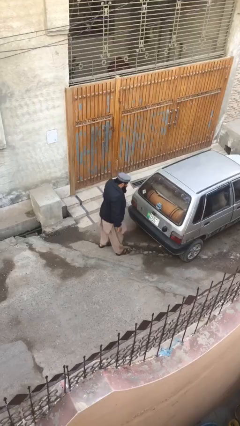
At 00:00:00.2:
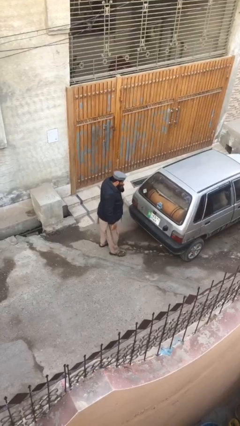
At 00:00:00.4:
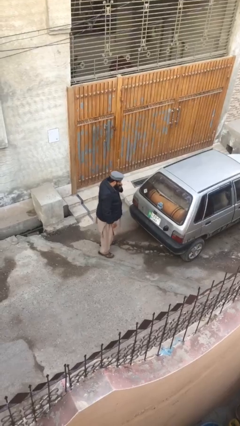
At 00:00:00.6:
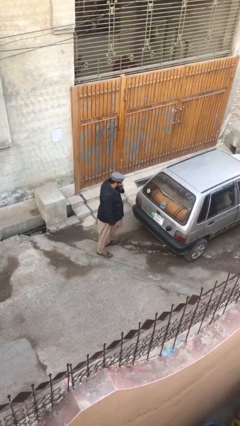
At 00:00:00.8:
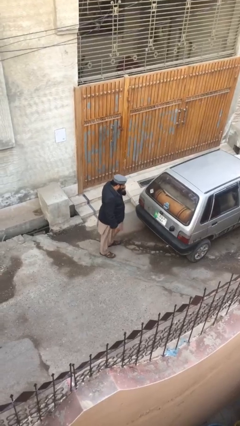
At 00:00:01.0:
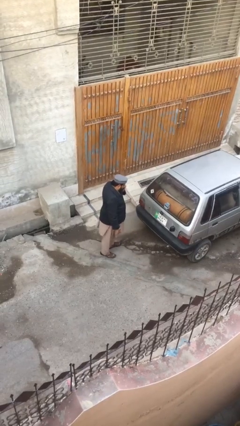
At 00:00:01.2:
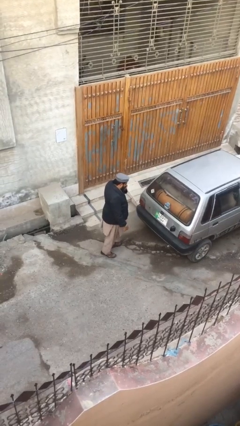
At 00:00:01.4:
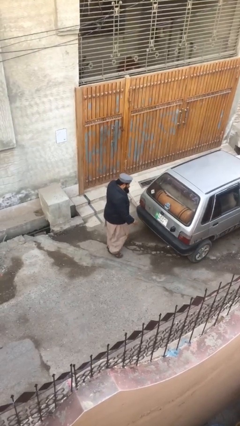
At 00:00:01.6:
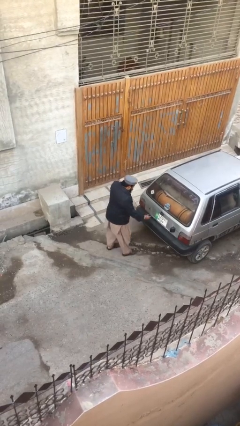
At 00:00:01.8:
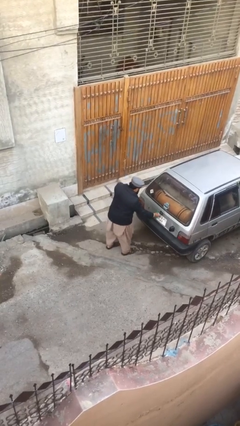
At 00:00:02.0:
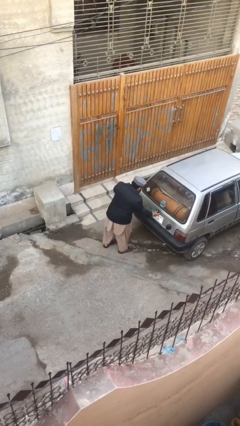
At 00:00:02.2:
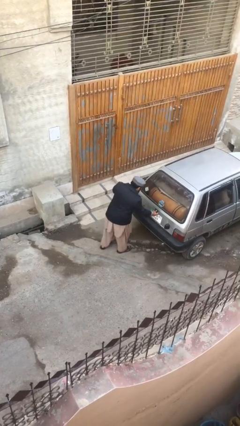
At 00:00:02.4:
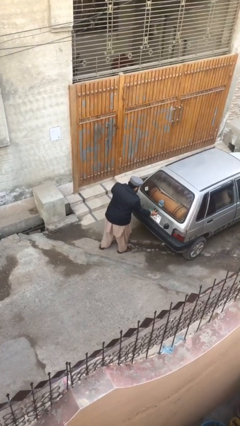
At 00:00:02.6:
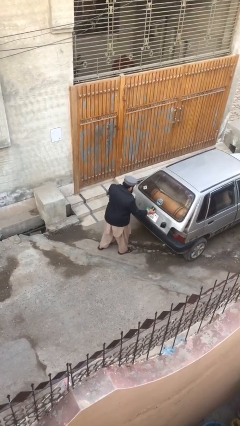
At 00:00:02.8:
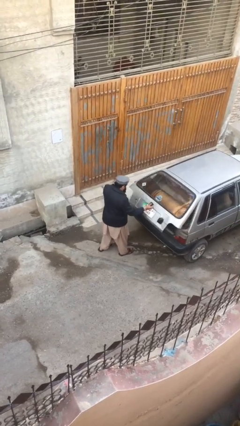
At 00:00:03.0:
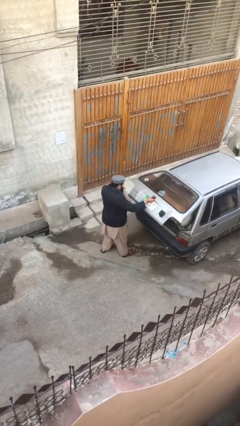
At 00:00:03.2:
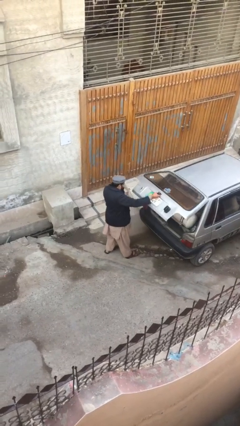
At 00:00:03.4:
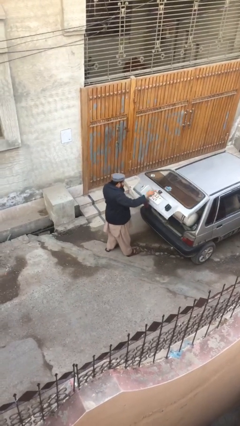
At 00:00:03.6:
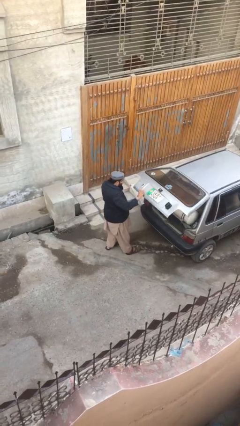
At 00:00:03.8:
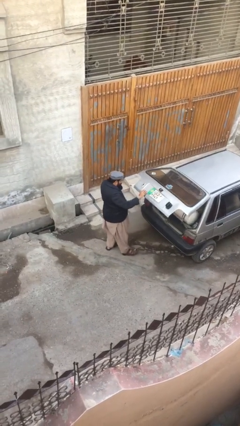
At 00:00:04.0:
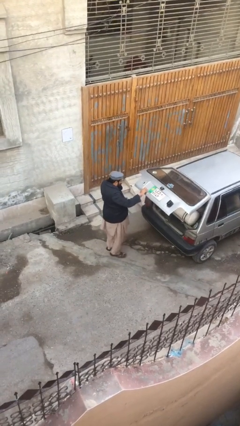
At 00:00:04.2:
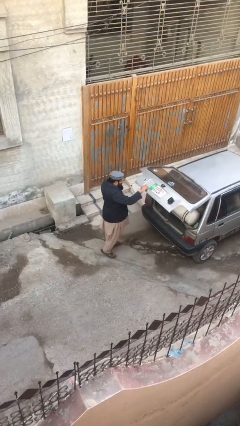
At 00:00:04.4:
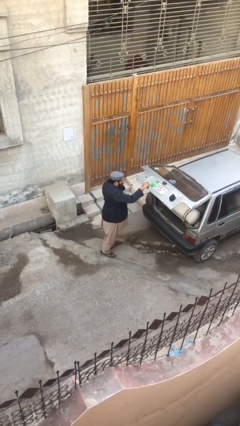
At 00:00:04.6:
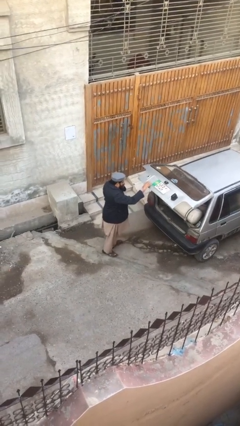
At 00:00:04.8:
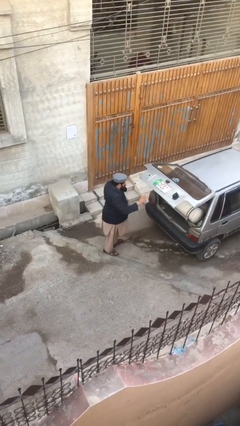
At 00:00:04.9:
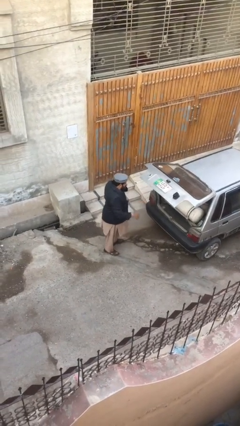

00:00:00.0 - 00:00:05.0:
person opens car trunk

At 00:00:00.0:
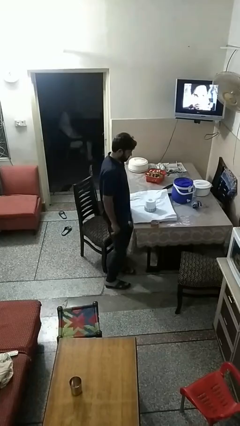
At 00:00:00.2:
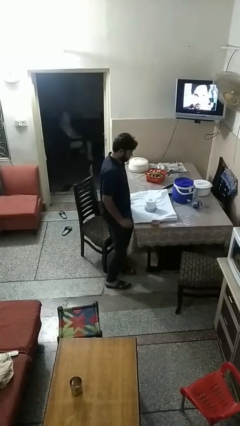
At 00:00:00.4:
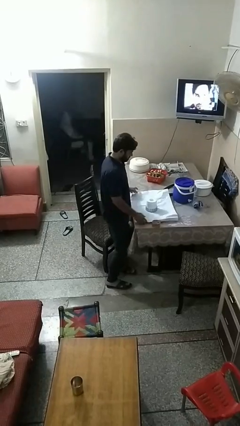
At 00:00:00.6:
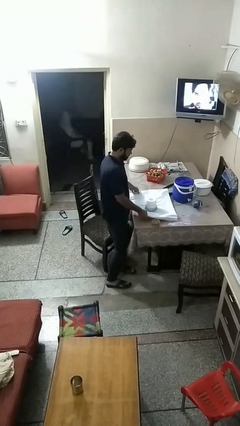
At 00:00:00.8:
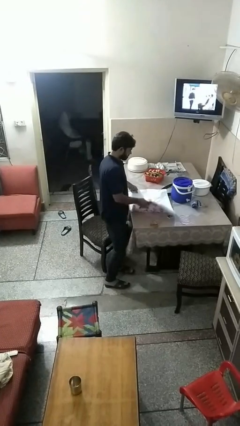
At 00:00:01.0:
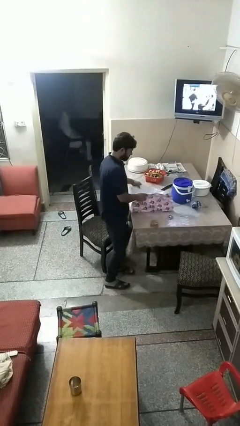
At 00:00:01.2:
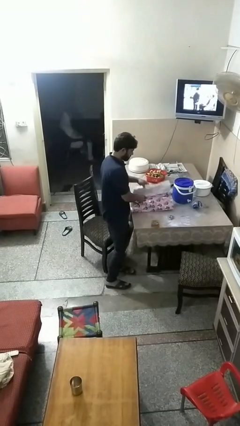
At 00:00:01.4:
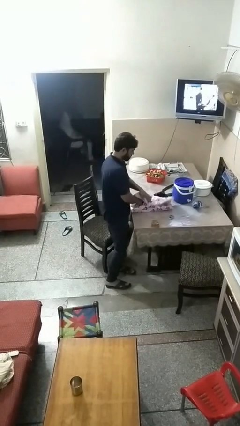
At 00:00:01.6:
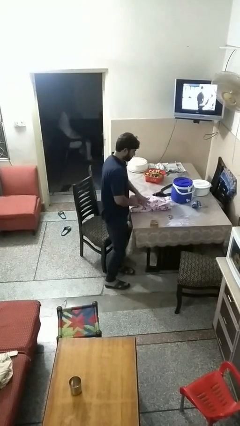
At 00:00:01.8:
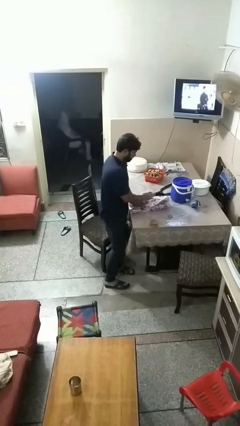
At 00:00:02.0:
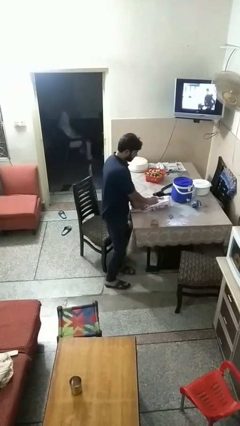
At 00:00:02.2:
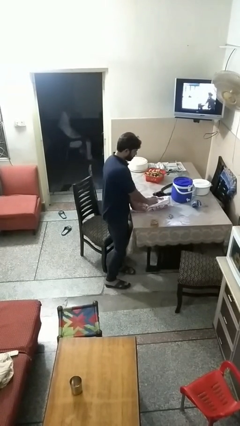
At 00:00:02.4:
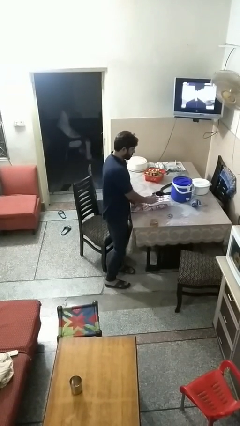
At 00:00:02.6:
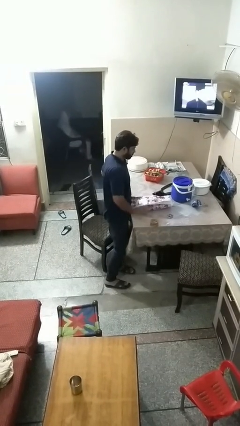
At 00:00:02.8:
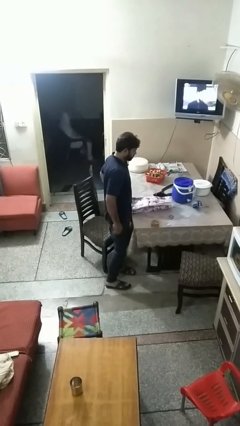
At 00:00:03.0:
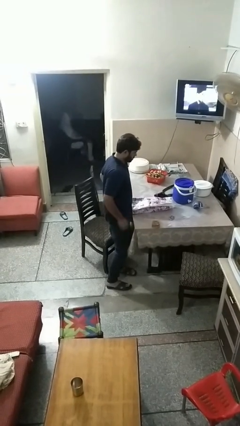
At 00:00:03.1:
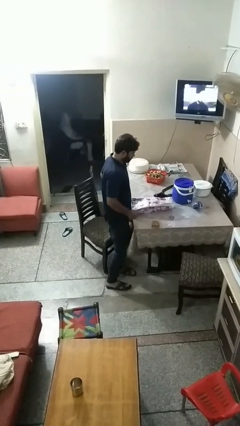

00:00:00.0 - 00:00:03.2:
person wraps box

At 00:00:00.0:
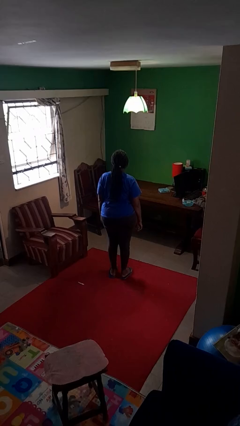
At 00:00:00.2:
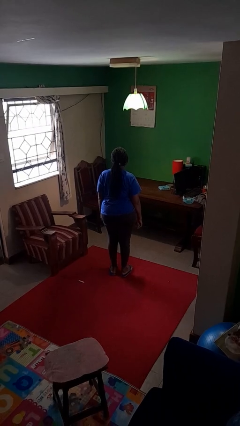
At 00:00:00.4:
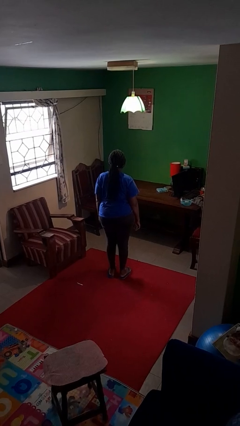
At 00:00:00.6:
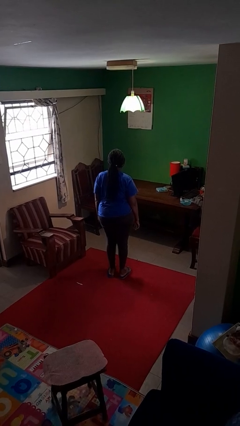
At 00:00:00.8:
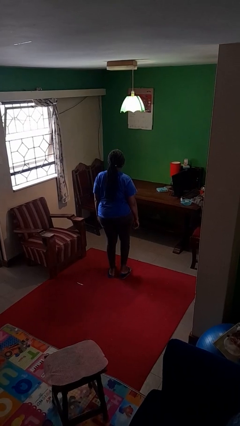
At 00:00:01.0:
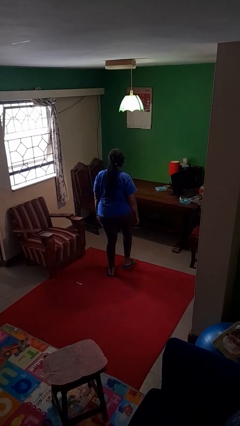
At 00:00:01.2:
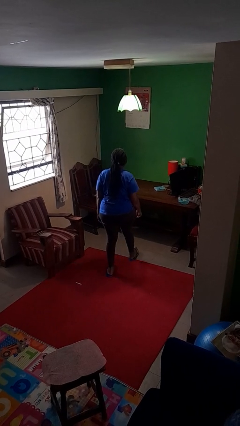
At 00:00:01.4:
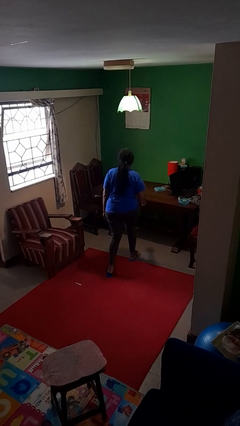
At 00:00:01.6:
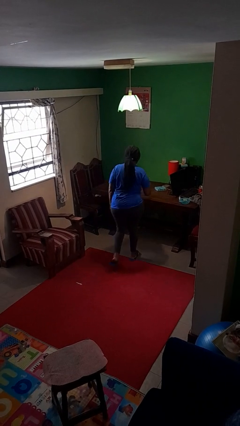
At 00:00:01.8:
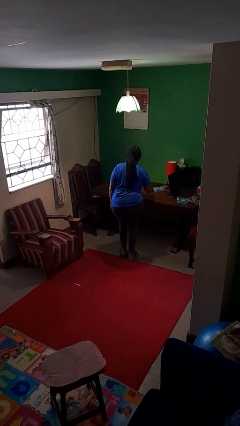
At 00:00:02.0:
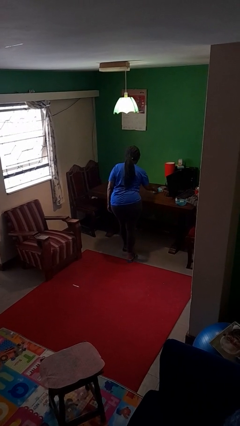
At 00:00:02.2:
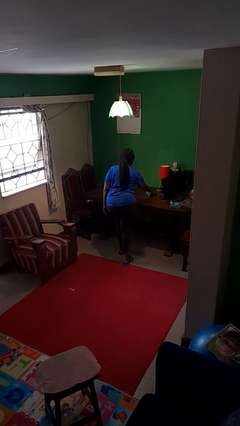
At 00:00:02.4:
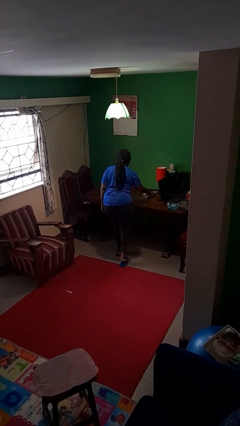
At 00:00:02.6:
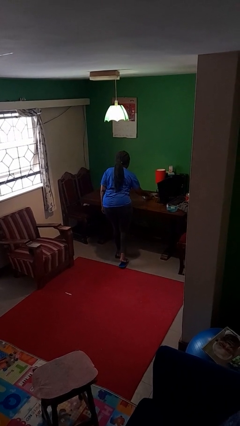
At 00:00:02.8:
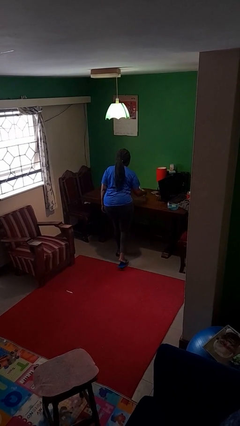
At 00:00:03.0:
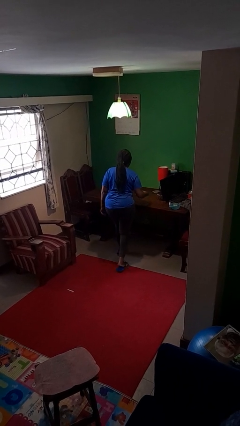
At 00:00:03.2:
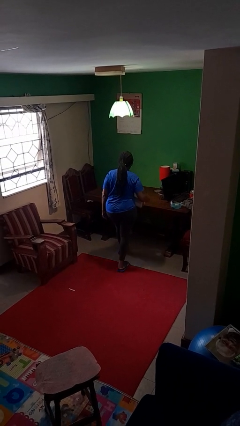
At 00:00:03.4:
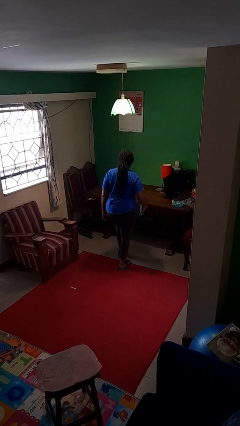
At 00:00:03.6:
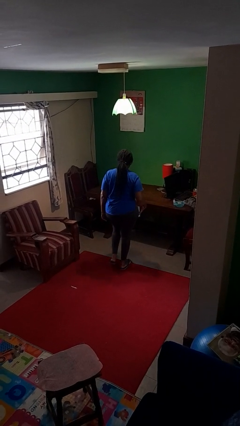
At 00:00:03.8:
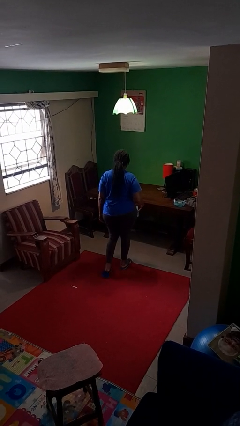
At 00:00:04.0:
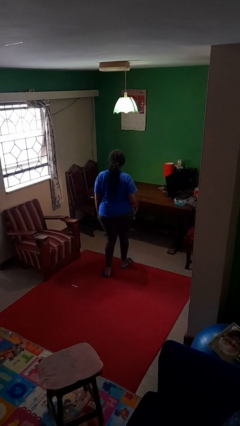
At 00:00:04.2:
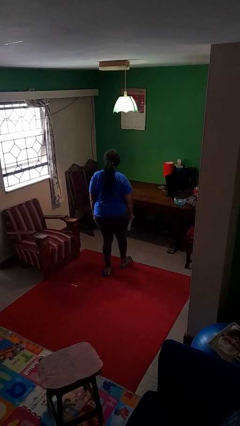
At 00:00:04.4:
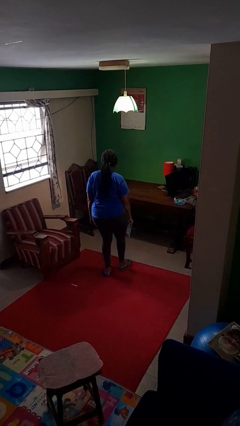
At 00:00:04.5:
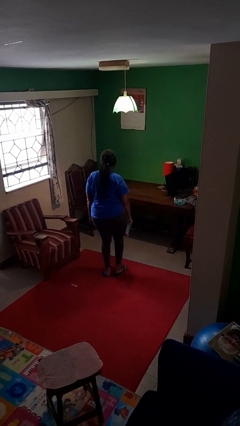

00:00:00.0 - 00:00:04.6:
person picks up object from table

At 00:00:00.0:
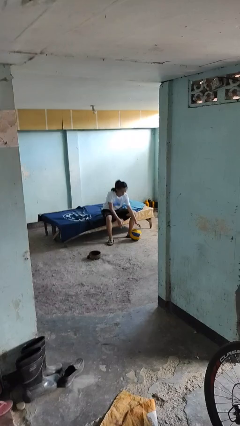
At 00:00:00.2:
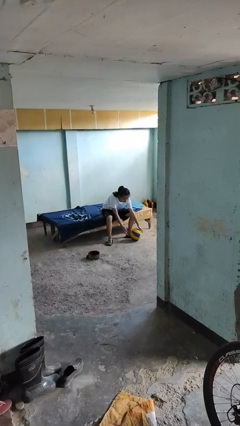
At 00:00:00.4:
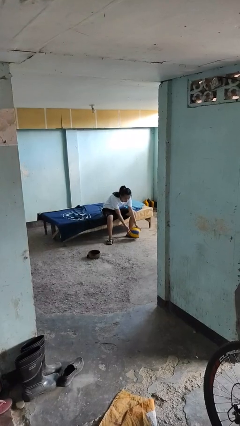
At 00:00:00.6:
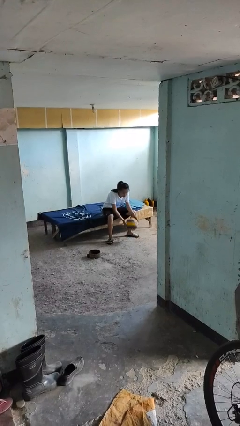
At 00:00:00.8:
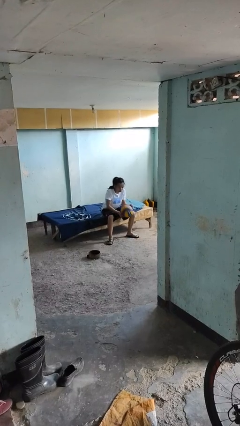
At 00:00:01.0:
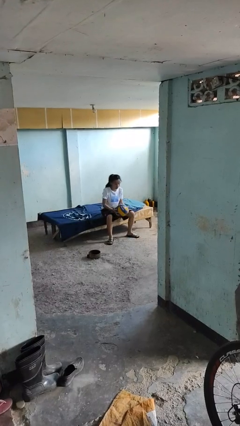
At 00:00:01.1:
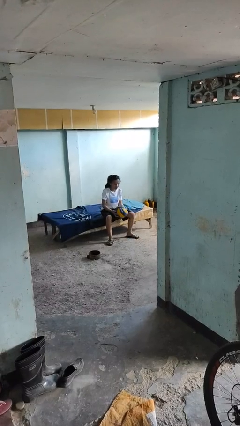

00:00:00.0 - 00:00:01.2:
person picks up object from floor

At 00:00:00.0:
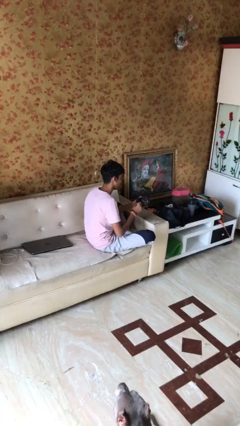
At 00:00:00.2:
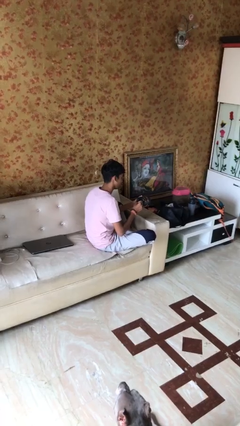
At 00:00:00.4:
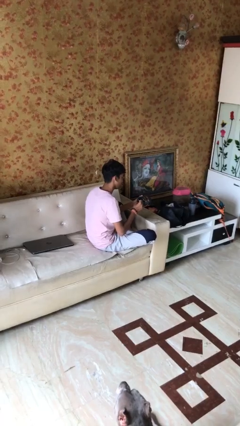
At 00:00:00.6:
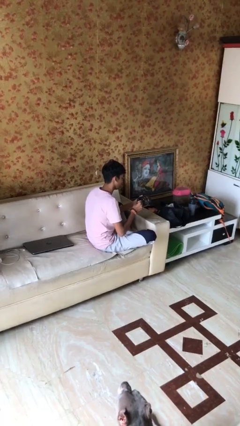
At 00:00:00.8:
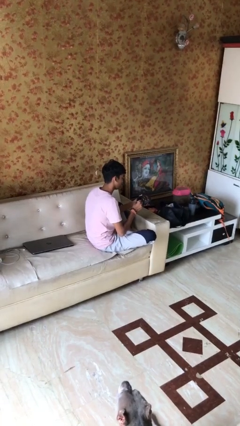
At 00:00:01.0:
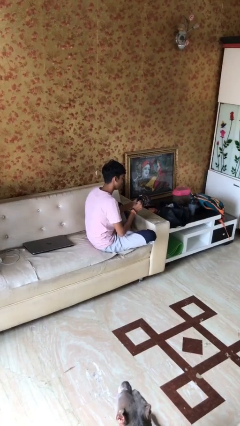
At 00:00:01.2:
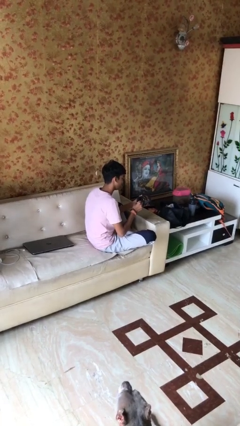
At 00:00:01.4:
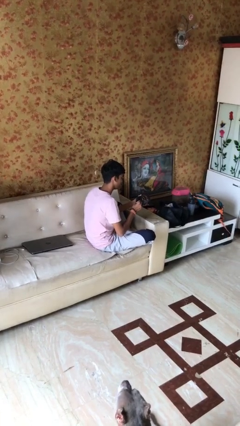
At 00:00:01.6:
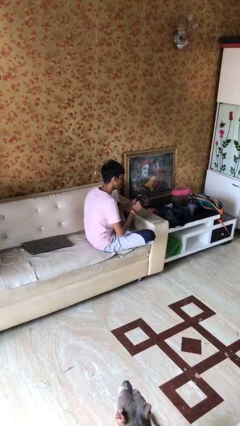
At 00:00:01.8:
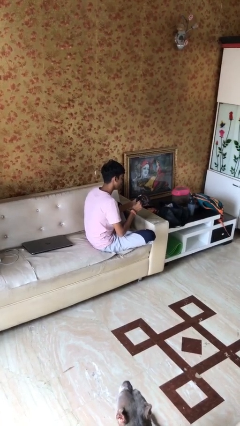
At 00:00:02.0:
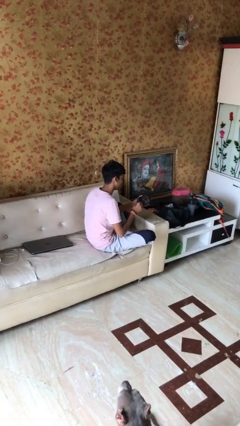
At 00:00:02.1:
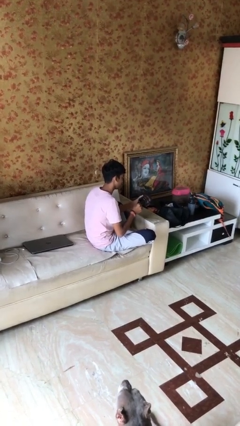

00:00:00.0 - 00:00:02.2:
person taps object with finger

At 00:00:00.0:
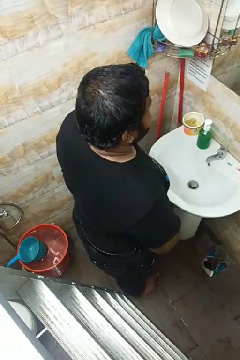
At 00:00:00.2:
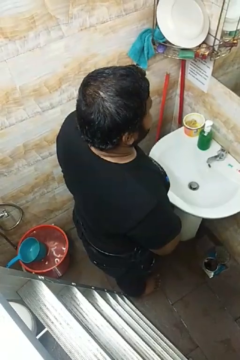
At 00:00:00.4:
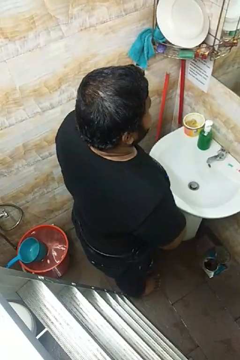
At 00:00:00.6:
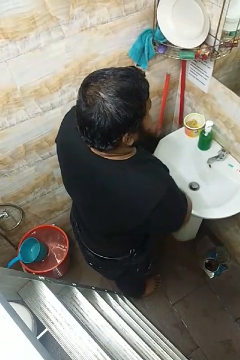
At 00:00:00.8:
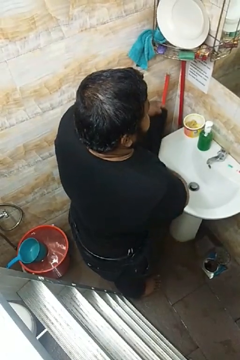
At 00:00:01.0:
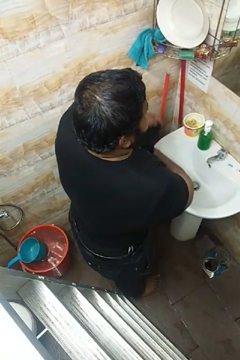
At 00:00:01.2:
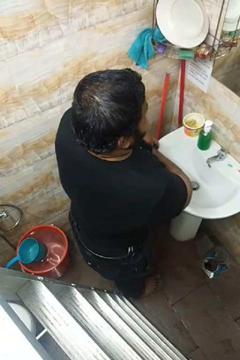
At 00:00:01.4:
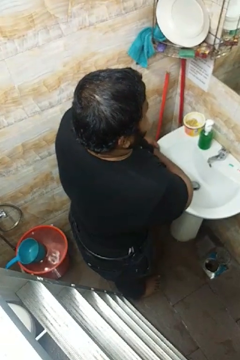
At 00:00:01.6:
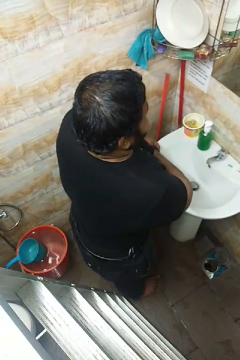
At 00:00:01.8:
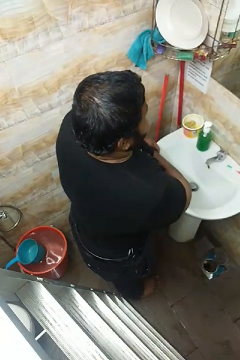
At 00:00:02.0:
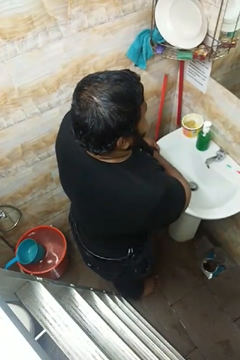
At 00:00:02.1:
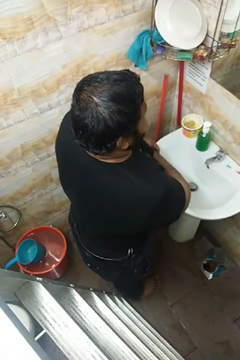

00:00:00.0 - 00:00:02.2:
person applies deodorant
